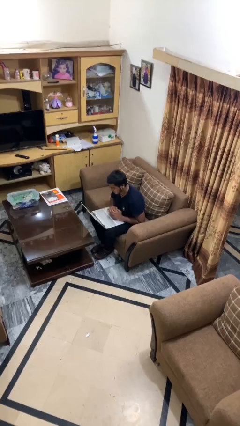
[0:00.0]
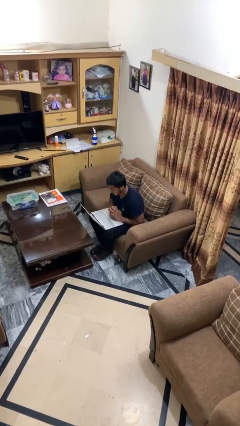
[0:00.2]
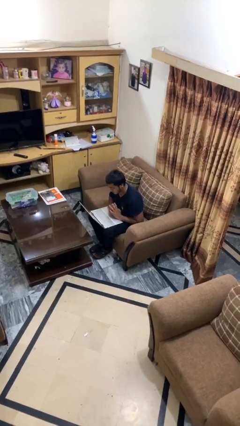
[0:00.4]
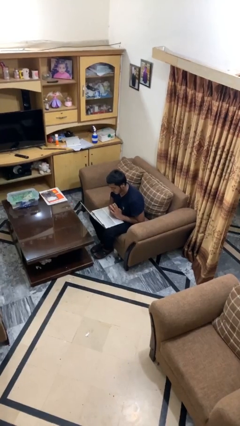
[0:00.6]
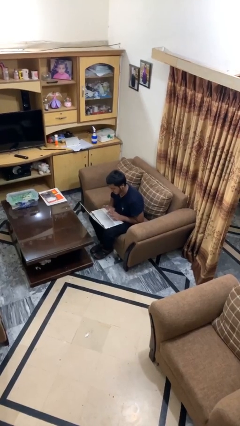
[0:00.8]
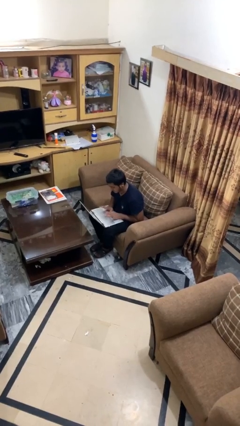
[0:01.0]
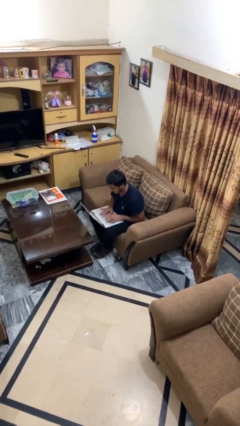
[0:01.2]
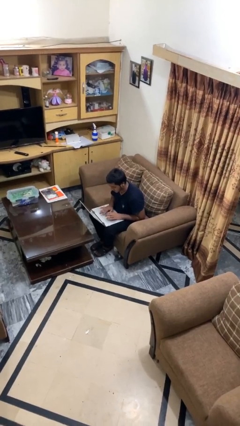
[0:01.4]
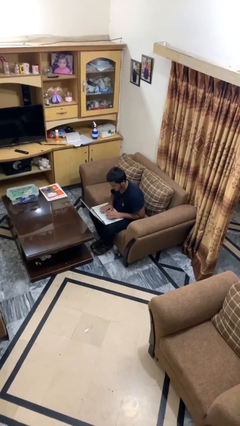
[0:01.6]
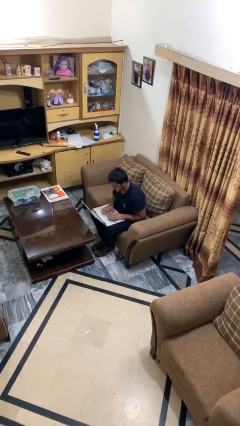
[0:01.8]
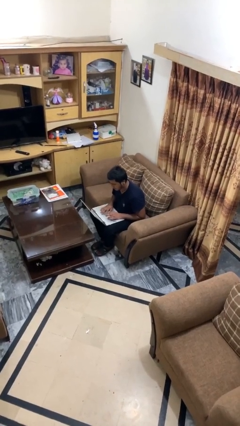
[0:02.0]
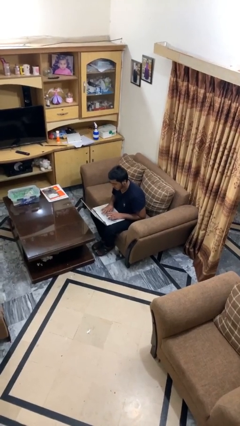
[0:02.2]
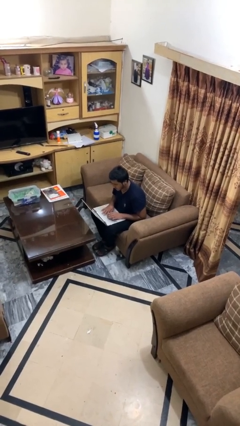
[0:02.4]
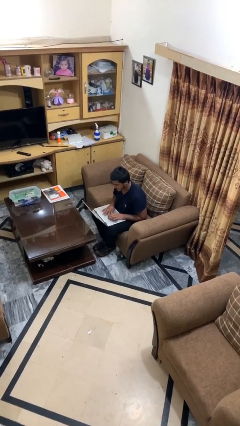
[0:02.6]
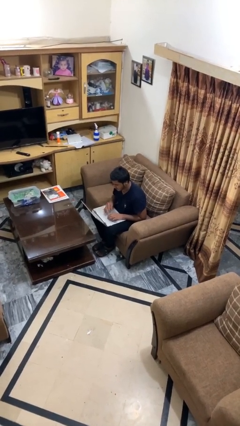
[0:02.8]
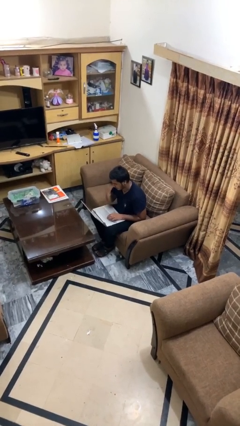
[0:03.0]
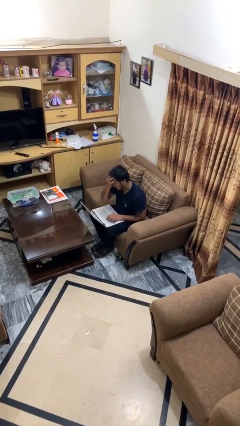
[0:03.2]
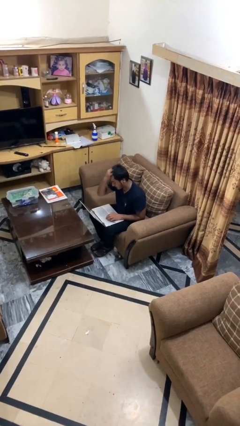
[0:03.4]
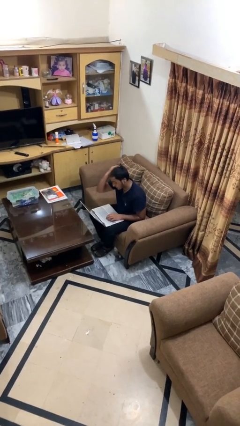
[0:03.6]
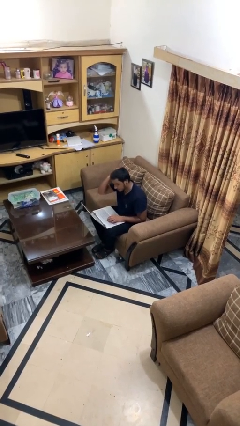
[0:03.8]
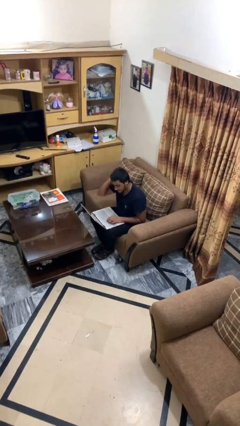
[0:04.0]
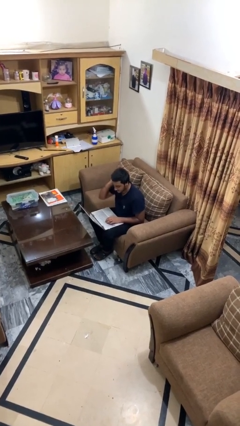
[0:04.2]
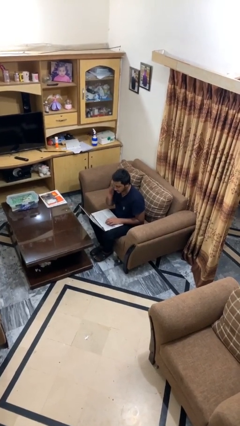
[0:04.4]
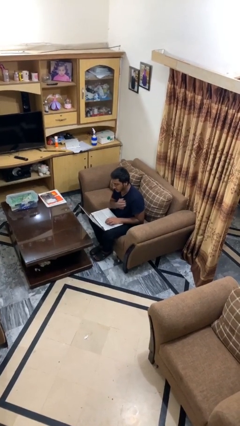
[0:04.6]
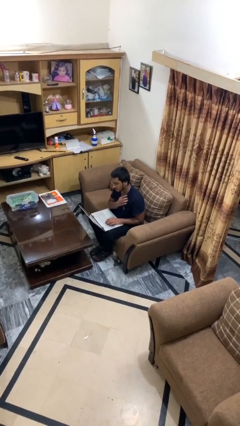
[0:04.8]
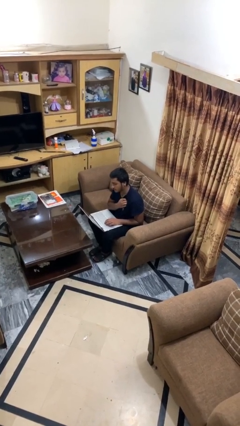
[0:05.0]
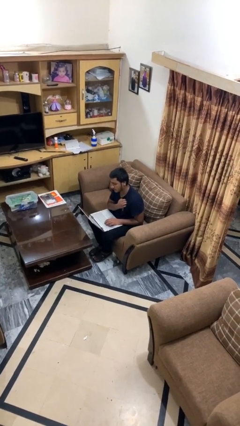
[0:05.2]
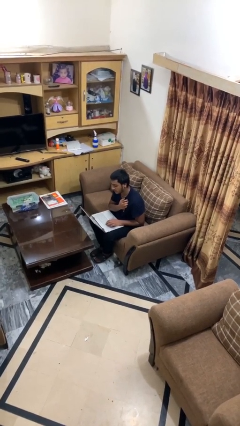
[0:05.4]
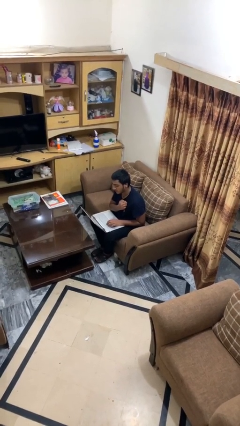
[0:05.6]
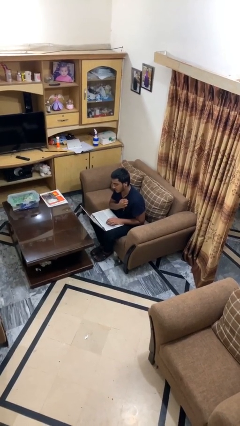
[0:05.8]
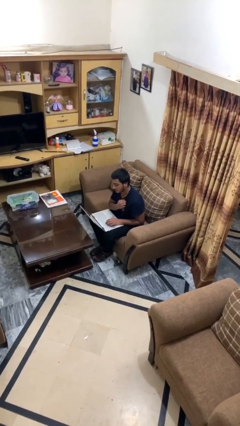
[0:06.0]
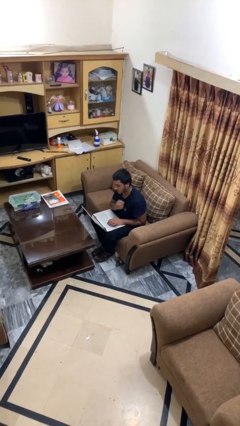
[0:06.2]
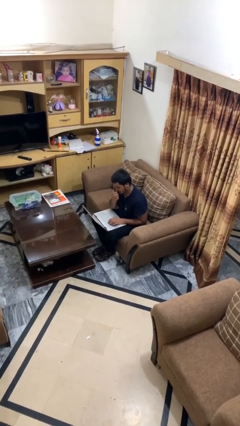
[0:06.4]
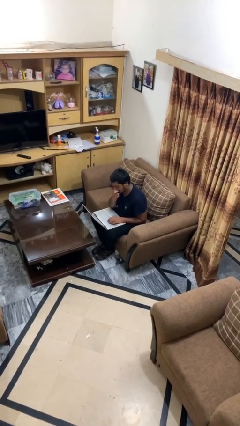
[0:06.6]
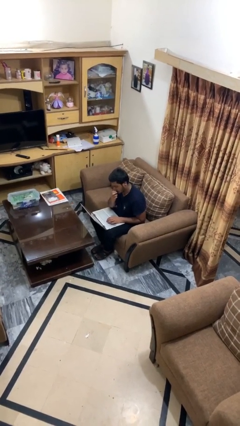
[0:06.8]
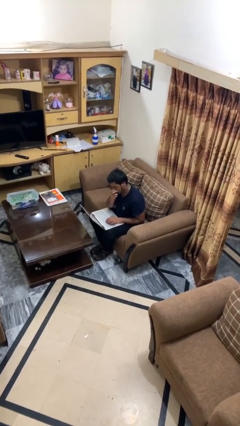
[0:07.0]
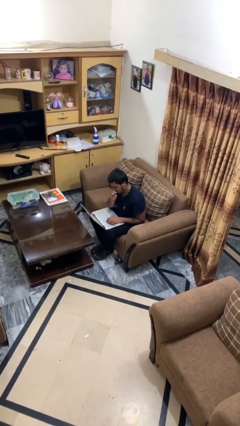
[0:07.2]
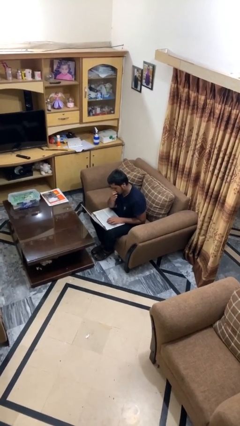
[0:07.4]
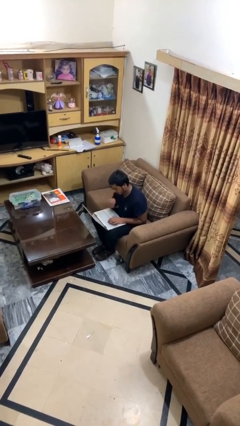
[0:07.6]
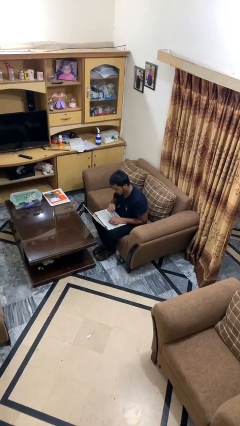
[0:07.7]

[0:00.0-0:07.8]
person interacts with laptop

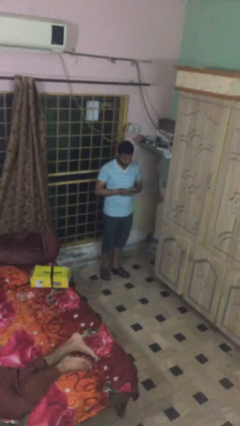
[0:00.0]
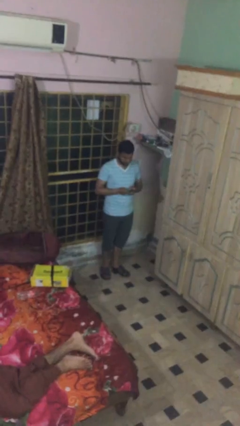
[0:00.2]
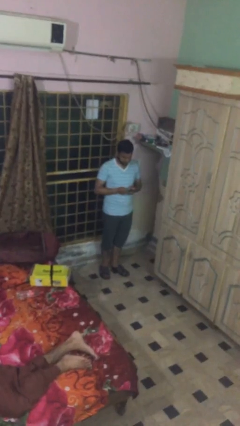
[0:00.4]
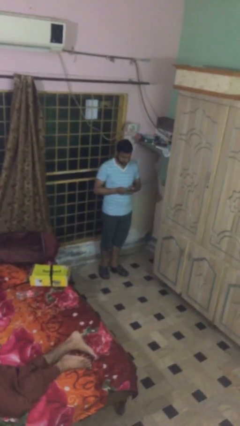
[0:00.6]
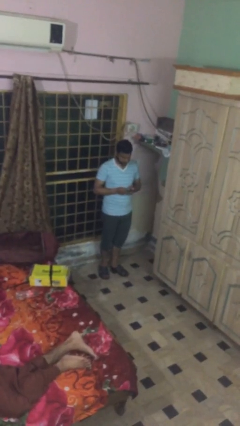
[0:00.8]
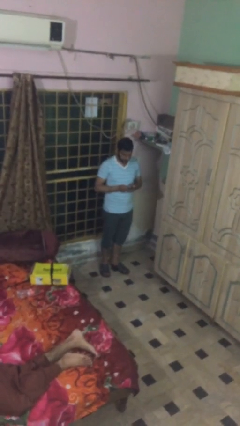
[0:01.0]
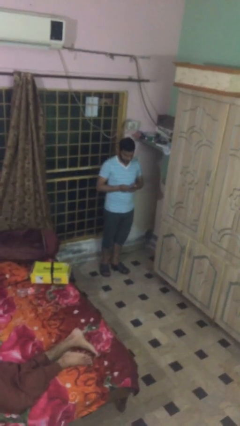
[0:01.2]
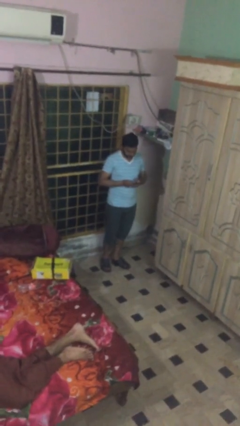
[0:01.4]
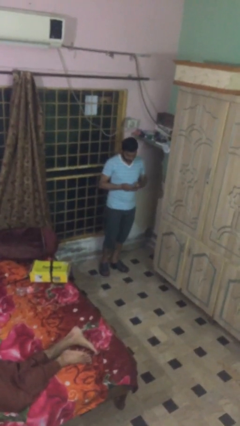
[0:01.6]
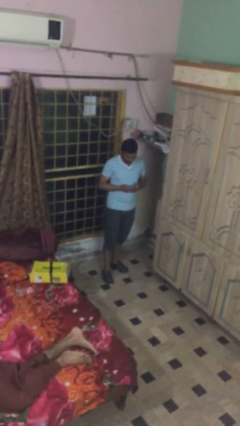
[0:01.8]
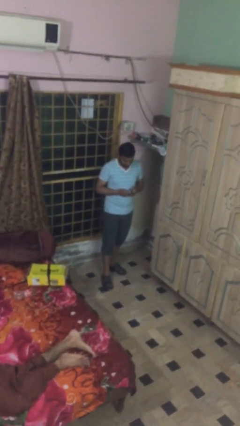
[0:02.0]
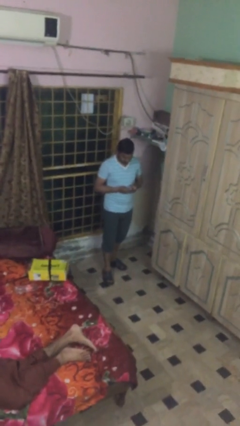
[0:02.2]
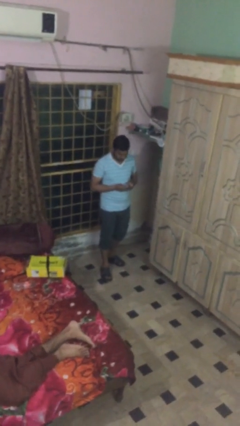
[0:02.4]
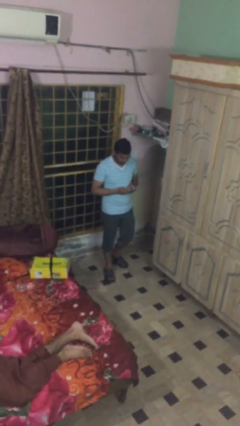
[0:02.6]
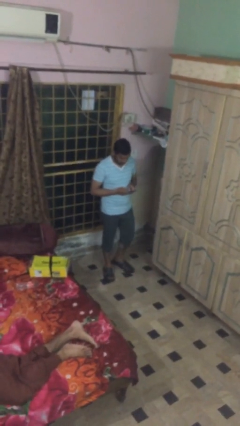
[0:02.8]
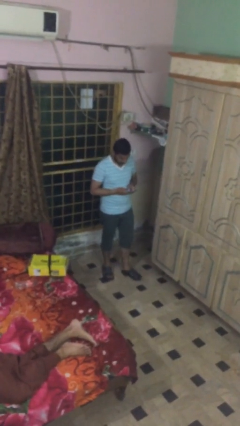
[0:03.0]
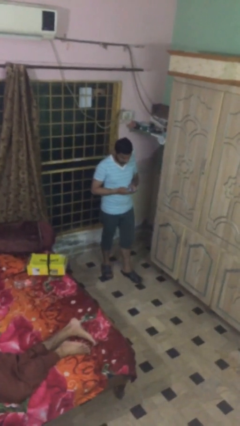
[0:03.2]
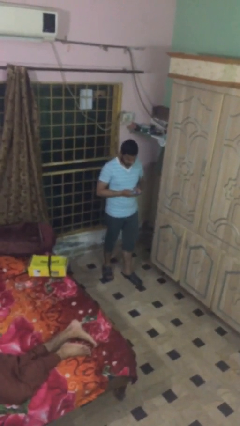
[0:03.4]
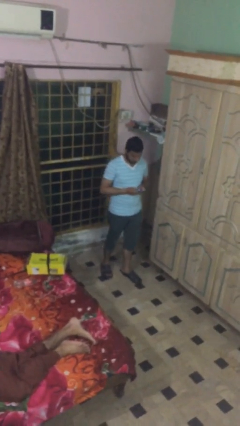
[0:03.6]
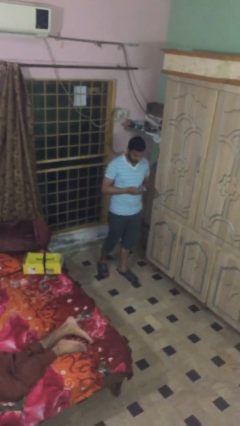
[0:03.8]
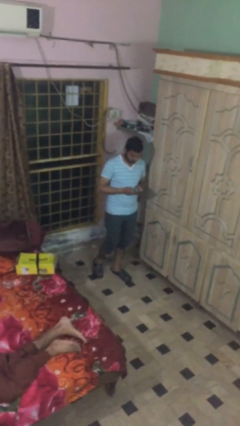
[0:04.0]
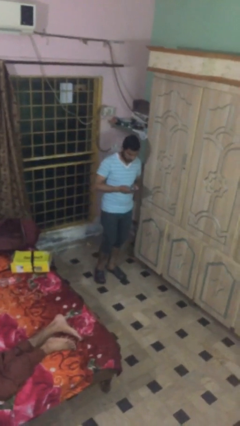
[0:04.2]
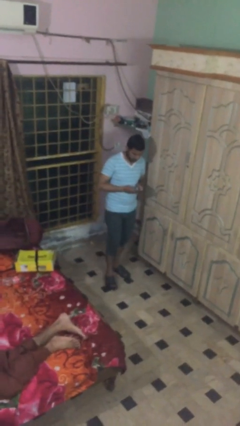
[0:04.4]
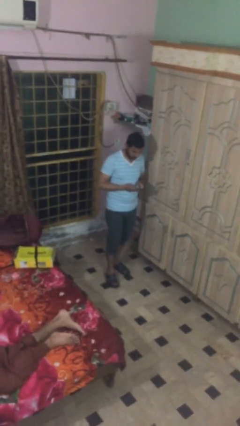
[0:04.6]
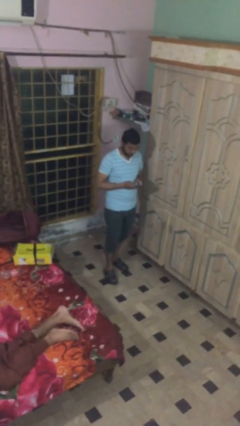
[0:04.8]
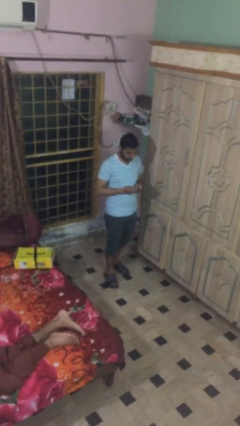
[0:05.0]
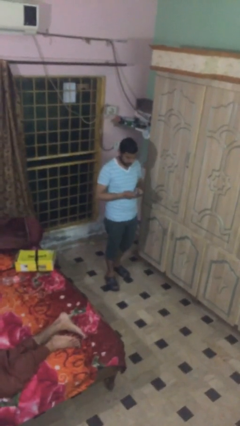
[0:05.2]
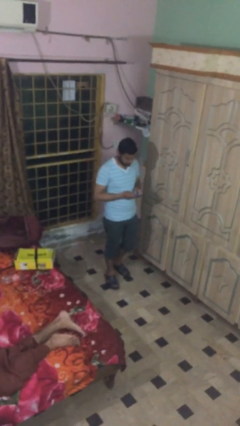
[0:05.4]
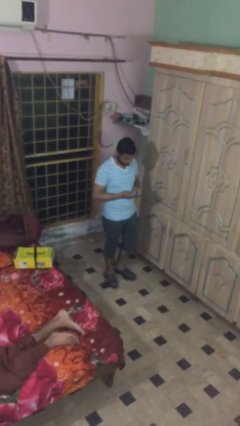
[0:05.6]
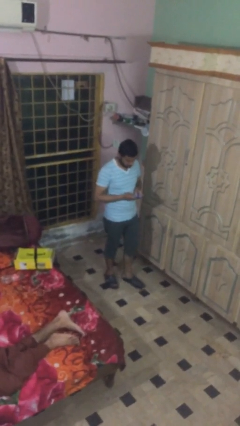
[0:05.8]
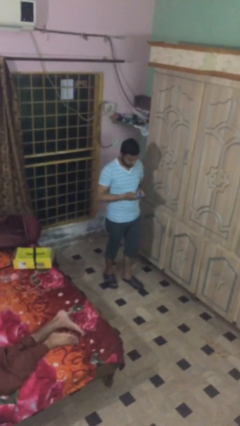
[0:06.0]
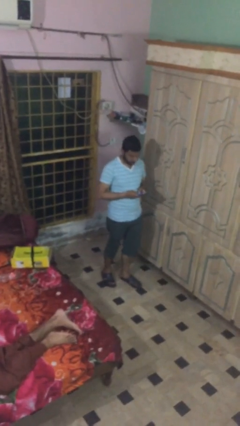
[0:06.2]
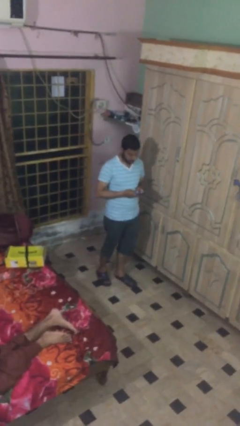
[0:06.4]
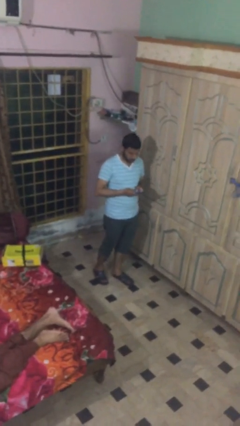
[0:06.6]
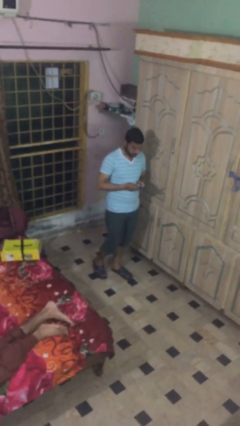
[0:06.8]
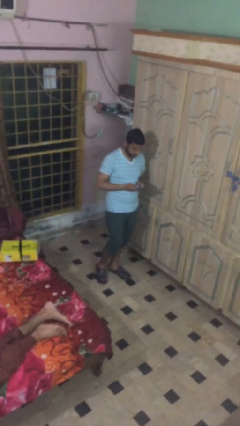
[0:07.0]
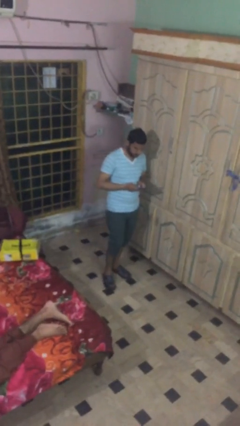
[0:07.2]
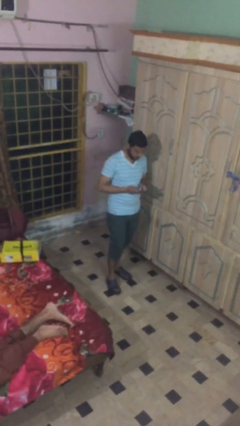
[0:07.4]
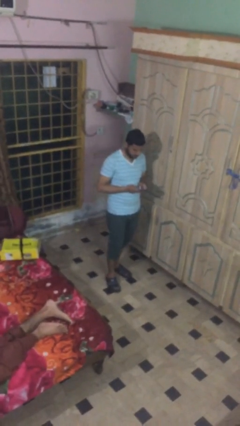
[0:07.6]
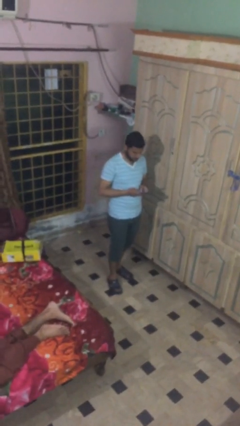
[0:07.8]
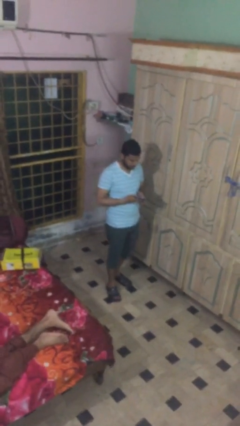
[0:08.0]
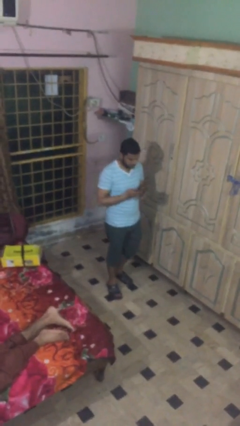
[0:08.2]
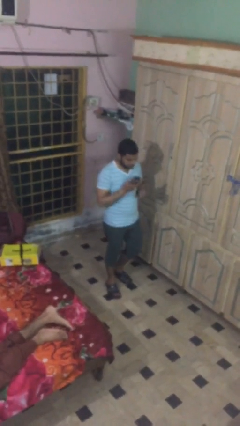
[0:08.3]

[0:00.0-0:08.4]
person texts on phone

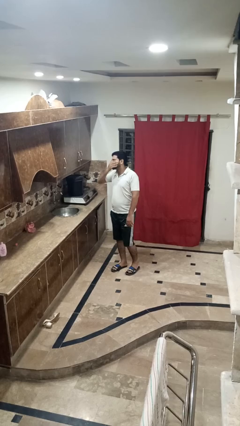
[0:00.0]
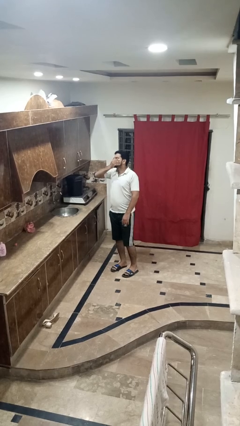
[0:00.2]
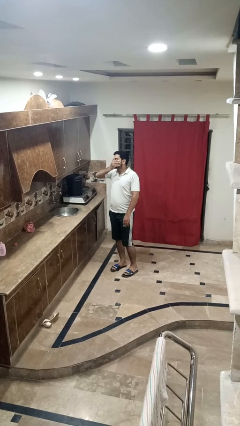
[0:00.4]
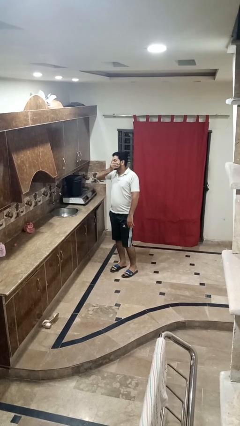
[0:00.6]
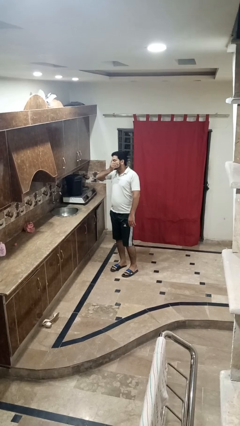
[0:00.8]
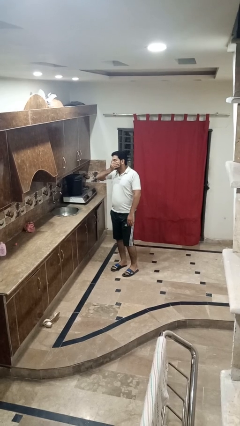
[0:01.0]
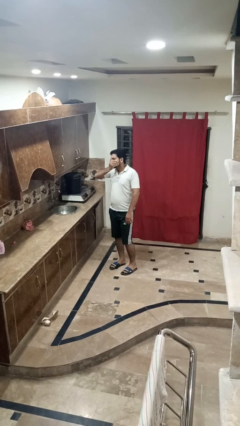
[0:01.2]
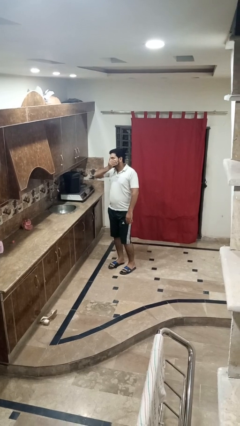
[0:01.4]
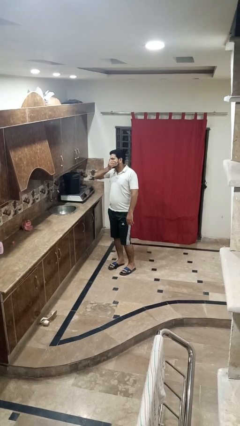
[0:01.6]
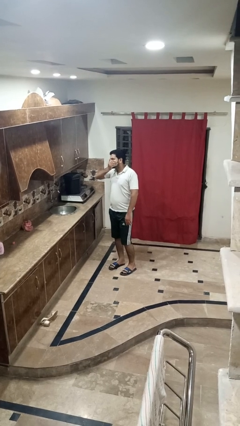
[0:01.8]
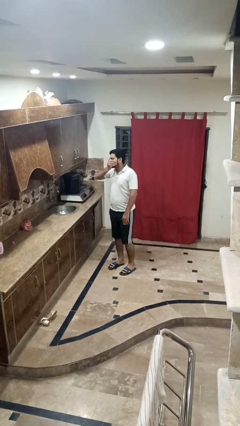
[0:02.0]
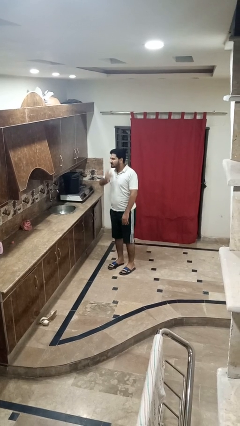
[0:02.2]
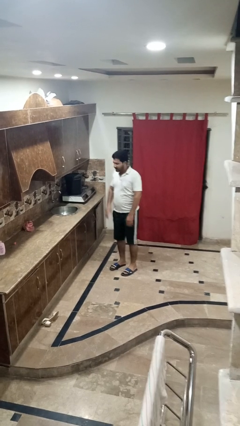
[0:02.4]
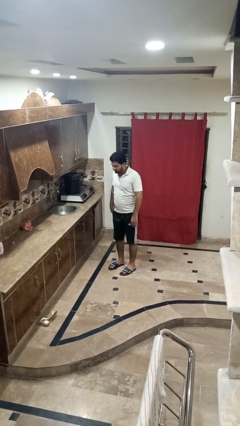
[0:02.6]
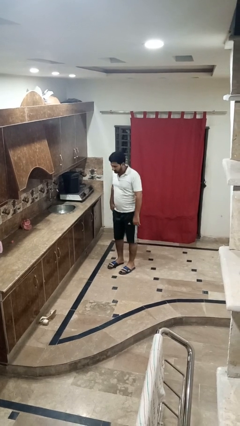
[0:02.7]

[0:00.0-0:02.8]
person sneezes into hand
